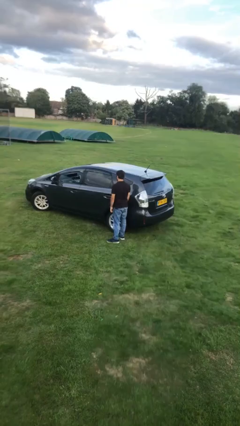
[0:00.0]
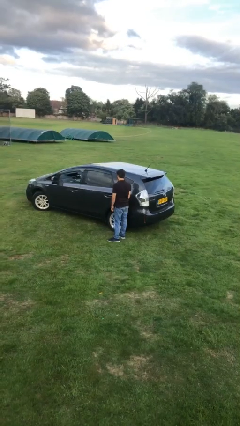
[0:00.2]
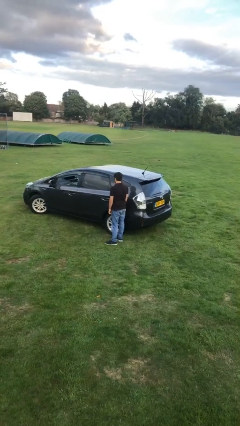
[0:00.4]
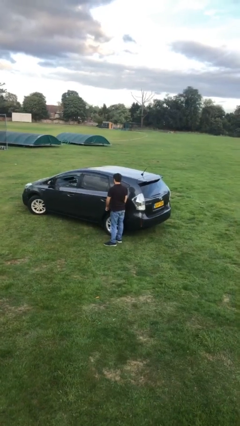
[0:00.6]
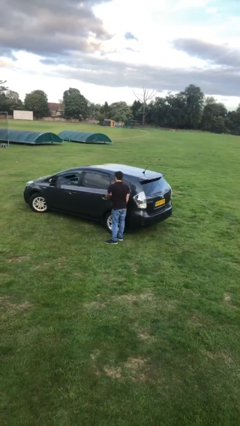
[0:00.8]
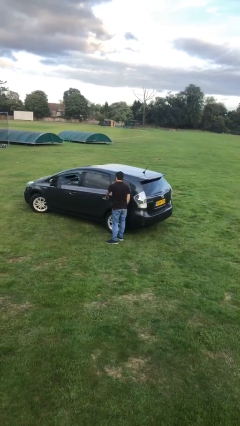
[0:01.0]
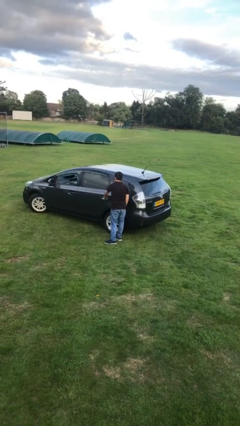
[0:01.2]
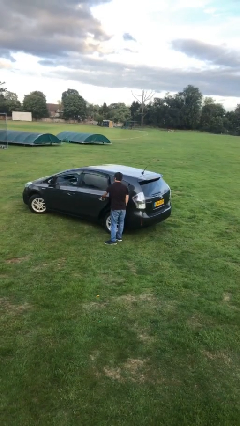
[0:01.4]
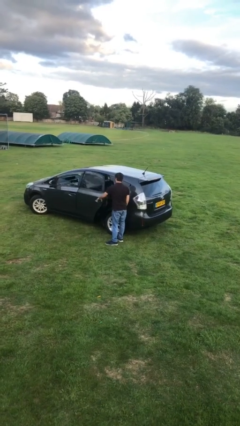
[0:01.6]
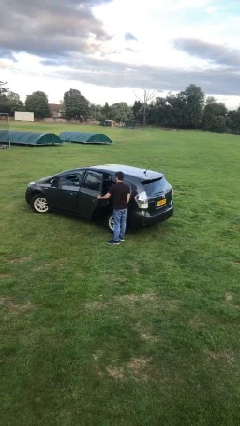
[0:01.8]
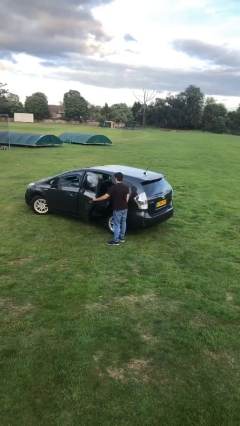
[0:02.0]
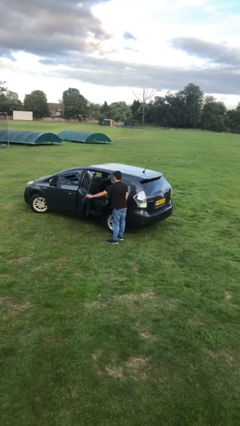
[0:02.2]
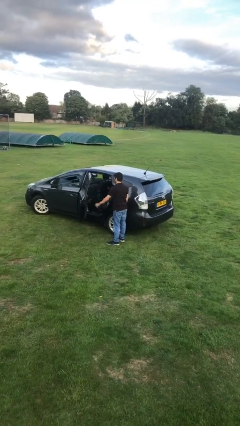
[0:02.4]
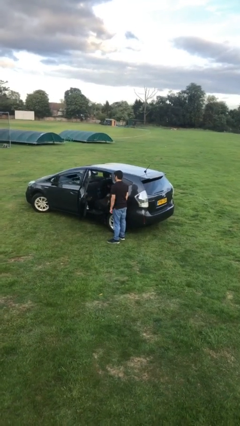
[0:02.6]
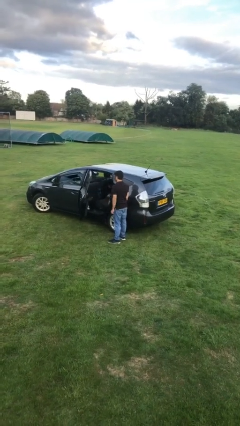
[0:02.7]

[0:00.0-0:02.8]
person opens car door

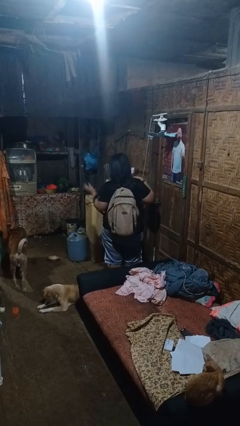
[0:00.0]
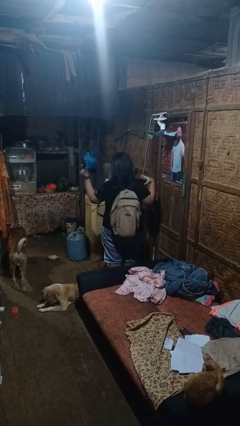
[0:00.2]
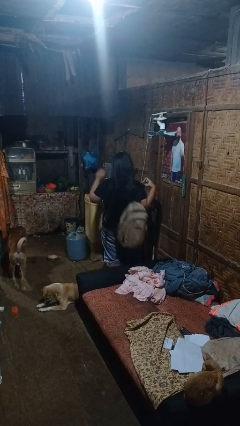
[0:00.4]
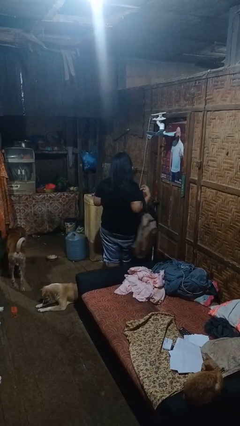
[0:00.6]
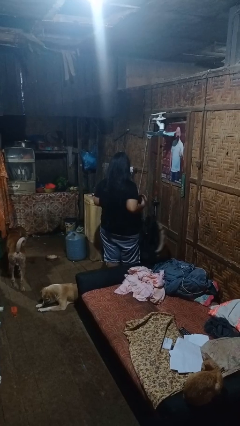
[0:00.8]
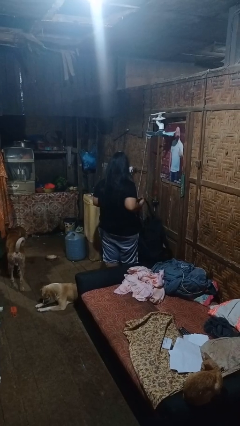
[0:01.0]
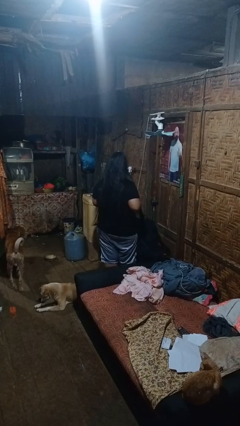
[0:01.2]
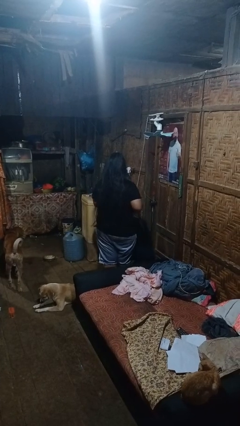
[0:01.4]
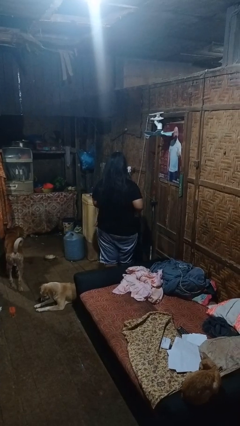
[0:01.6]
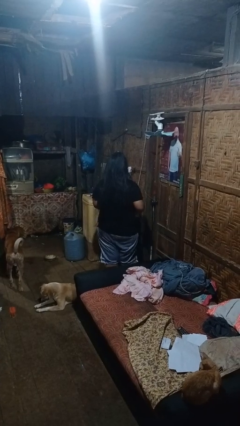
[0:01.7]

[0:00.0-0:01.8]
person takes off backpack

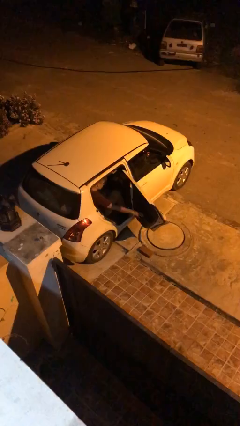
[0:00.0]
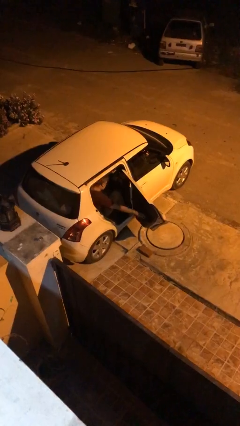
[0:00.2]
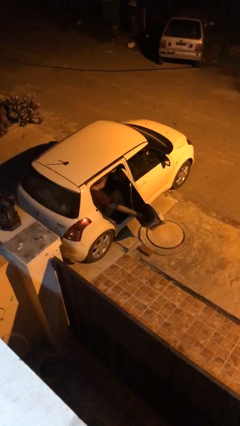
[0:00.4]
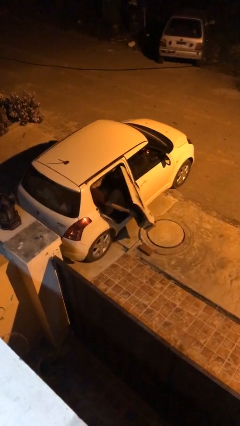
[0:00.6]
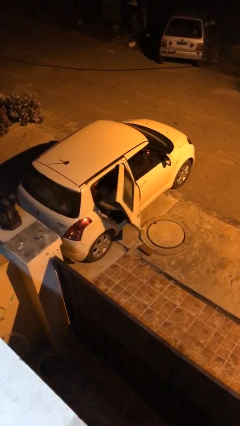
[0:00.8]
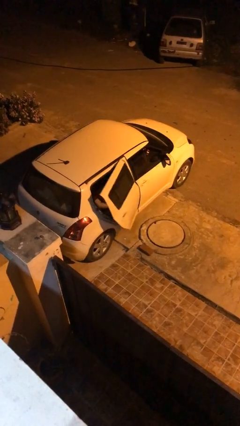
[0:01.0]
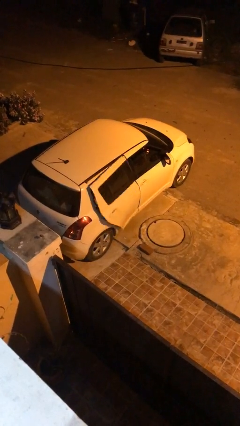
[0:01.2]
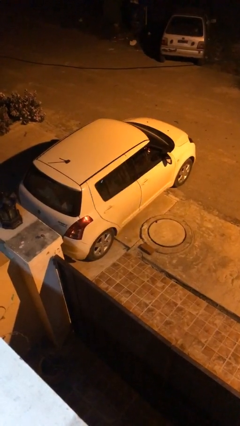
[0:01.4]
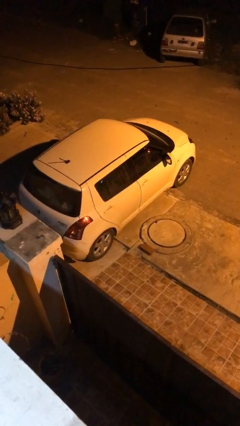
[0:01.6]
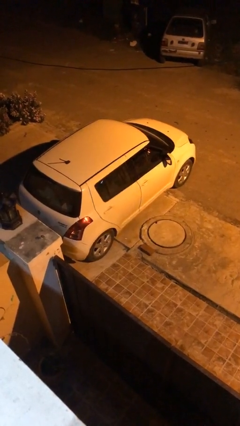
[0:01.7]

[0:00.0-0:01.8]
person closes car door

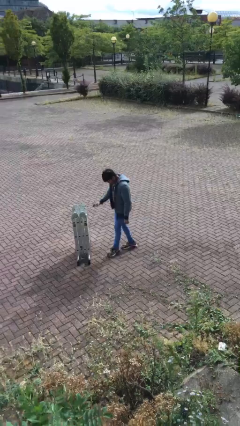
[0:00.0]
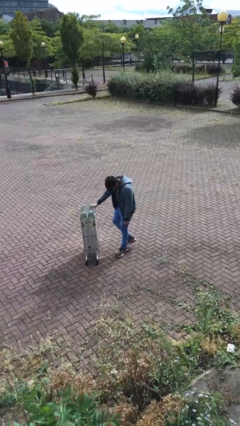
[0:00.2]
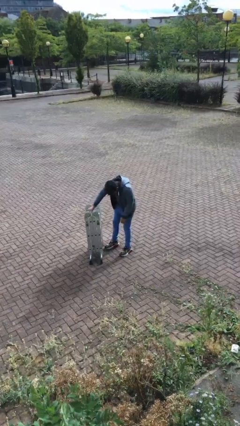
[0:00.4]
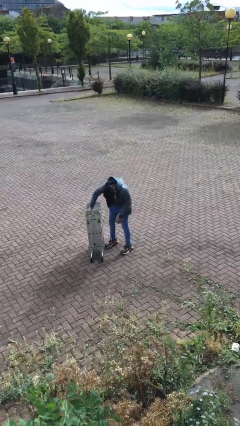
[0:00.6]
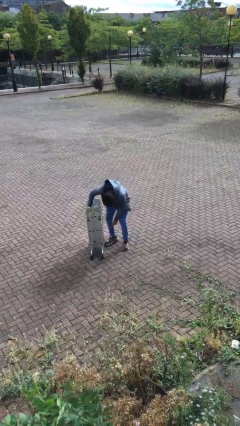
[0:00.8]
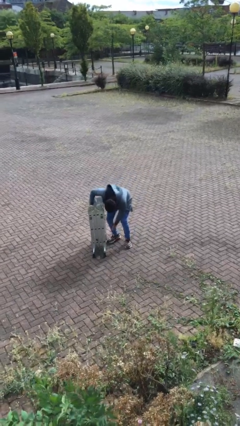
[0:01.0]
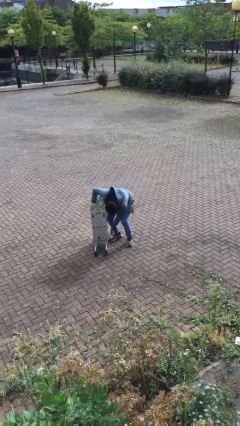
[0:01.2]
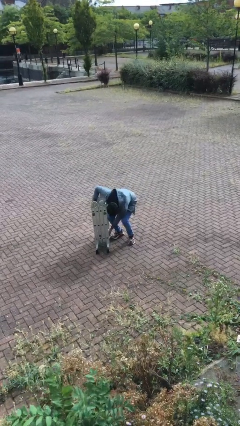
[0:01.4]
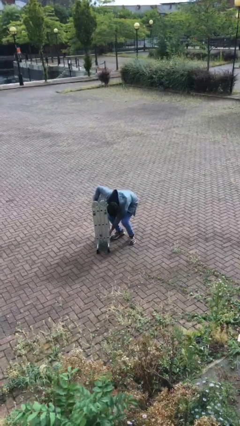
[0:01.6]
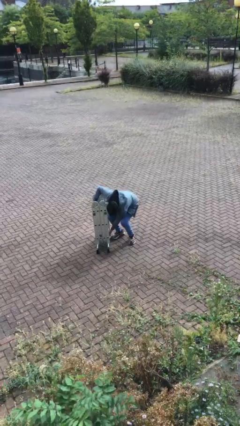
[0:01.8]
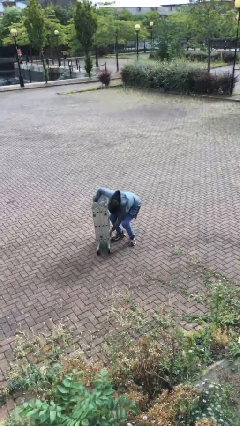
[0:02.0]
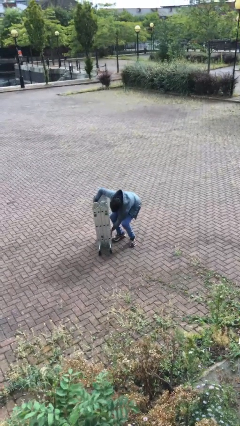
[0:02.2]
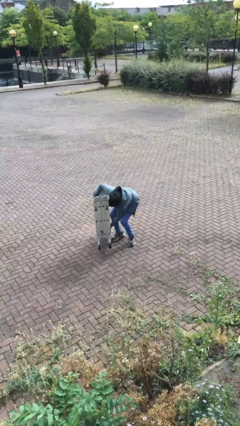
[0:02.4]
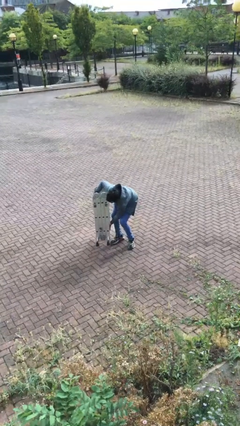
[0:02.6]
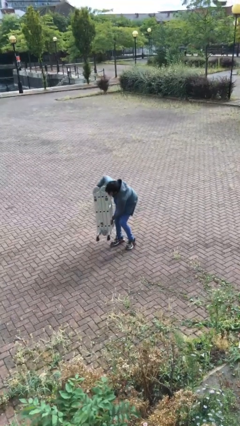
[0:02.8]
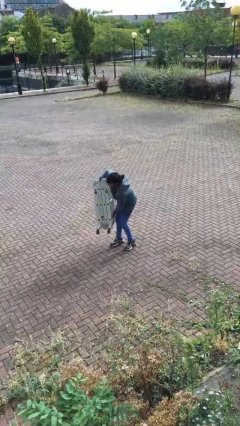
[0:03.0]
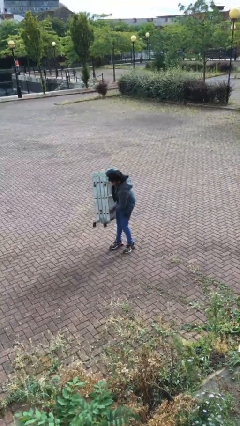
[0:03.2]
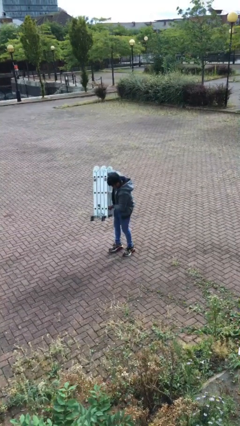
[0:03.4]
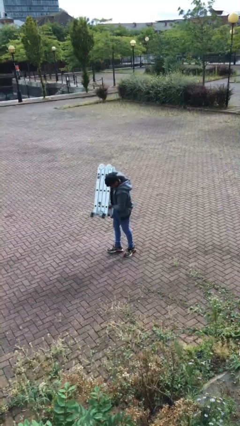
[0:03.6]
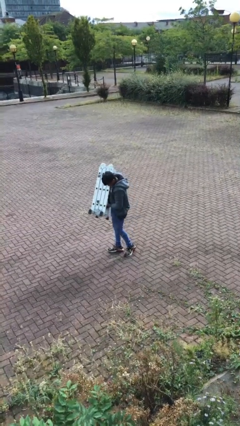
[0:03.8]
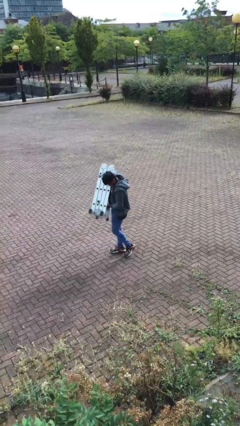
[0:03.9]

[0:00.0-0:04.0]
person picks up object from floor

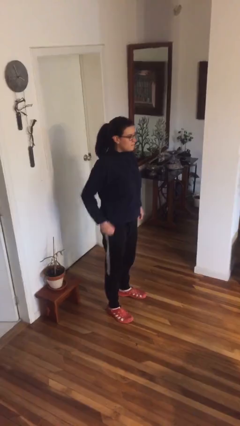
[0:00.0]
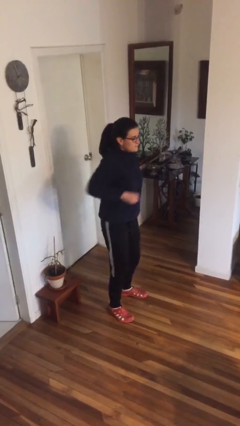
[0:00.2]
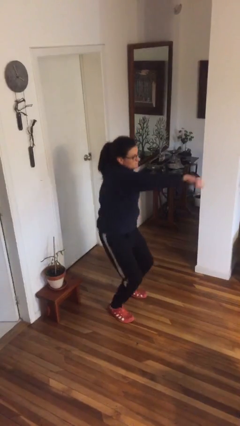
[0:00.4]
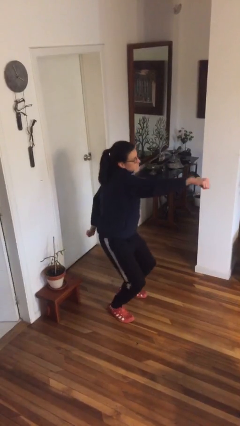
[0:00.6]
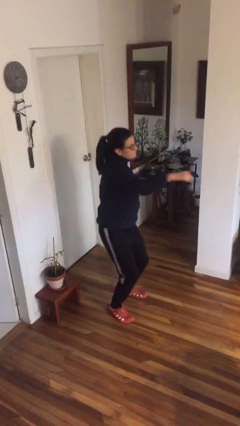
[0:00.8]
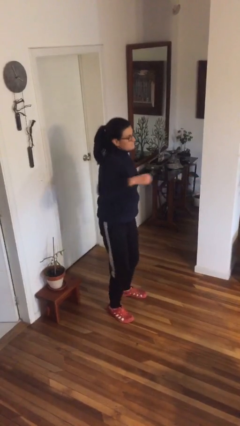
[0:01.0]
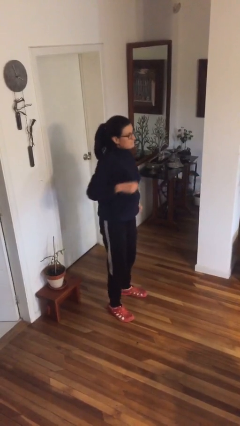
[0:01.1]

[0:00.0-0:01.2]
person punches

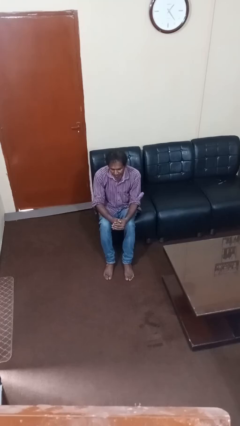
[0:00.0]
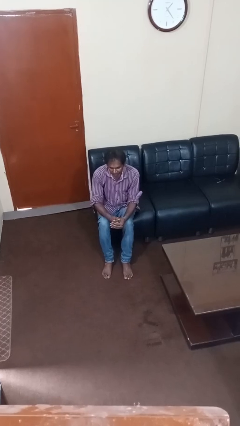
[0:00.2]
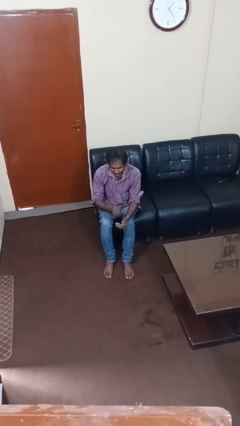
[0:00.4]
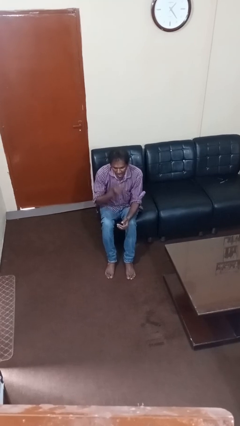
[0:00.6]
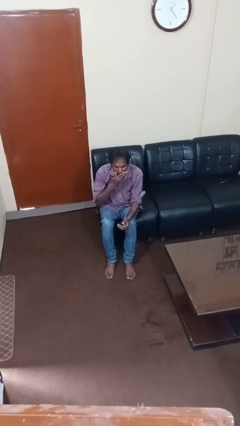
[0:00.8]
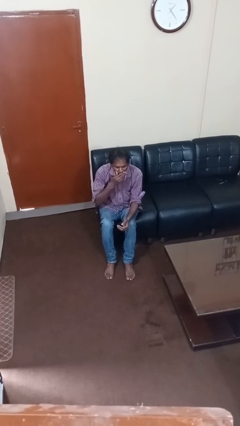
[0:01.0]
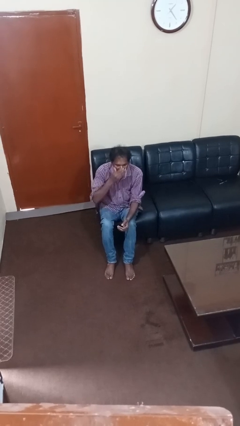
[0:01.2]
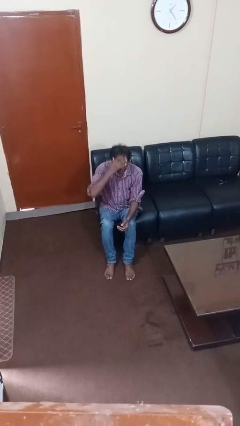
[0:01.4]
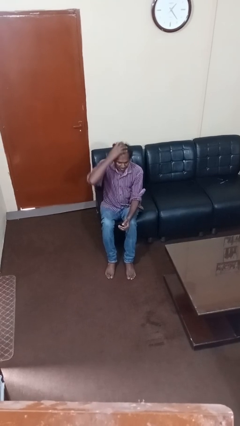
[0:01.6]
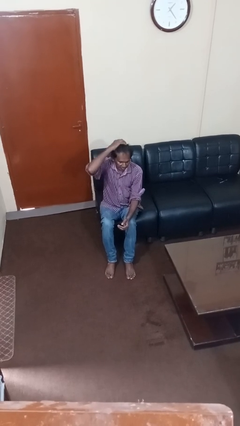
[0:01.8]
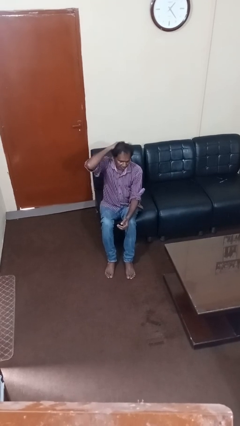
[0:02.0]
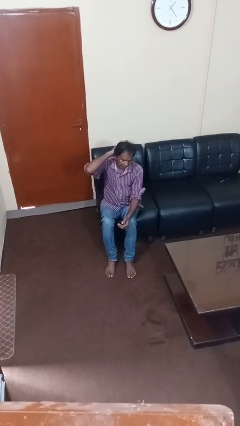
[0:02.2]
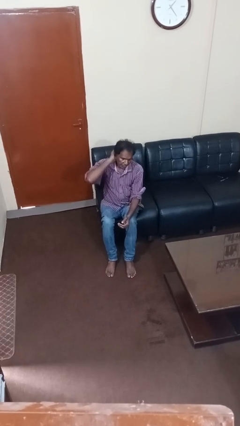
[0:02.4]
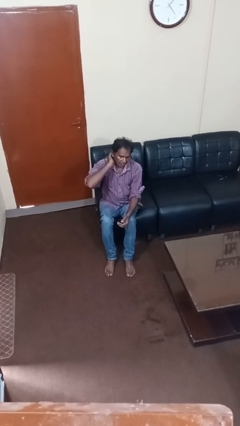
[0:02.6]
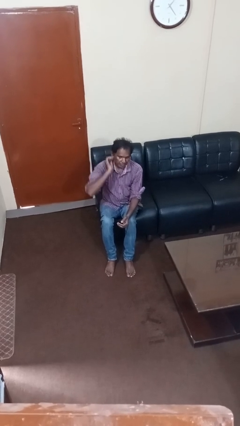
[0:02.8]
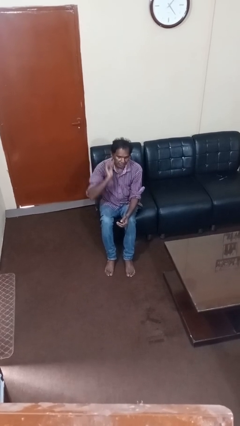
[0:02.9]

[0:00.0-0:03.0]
person yawns

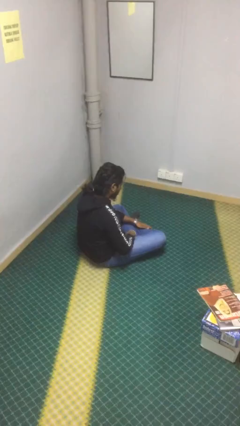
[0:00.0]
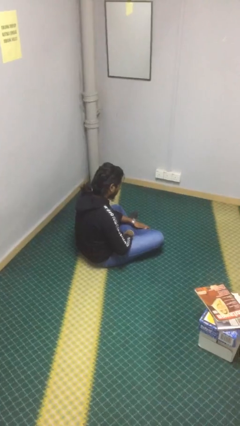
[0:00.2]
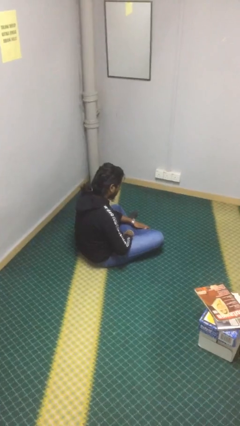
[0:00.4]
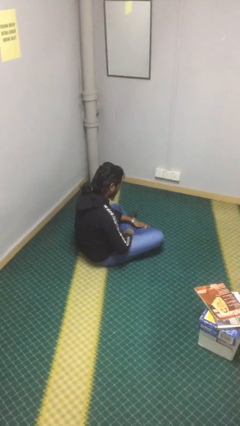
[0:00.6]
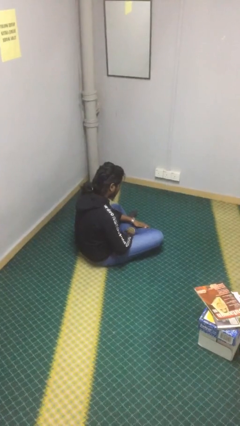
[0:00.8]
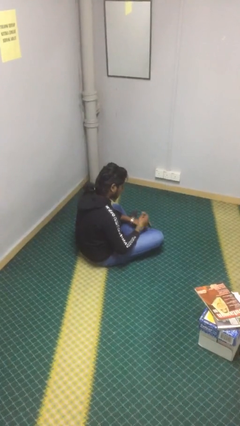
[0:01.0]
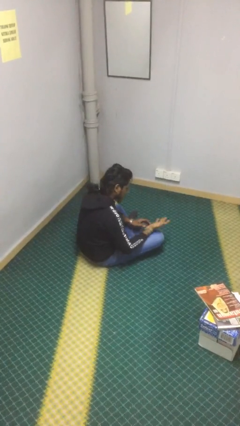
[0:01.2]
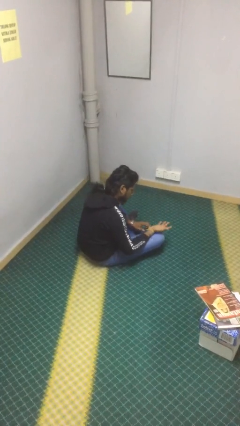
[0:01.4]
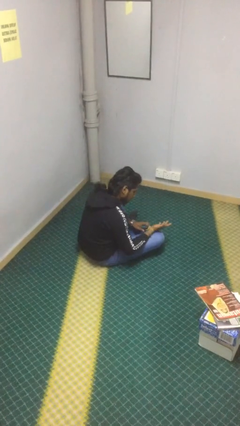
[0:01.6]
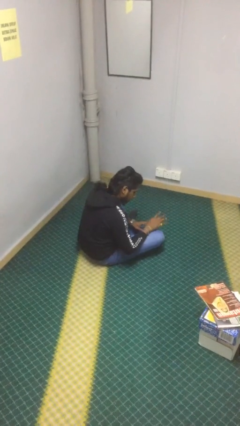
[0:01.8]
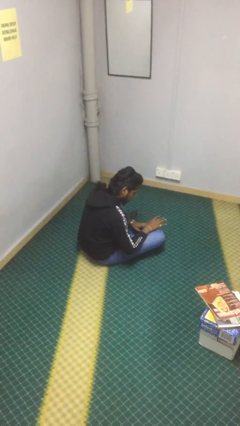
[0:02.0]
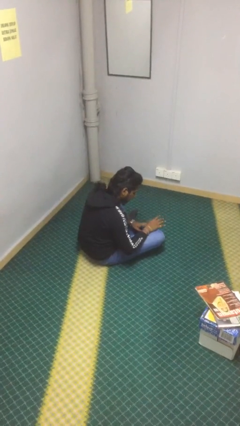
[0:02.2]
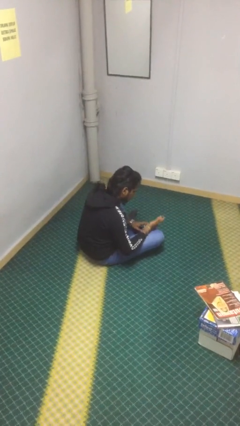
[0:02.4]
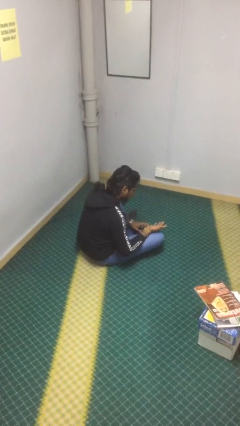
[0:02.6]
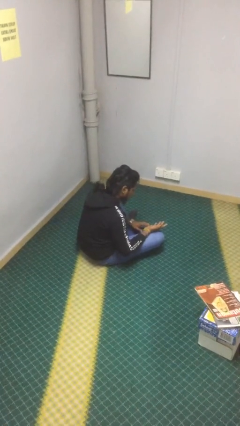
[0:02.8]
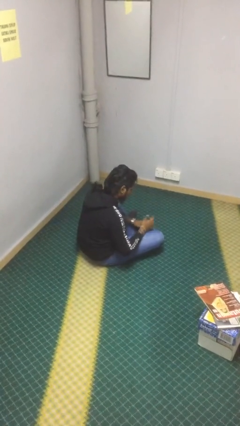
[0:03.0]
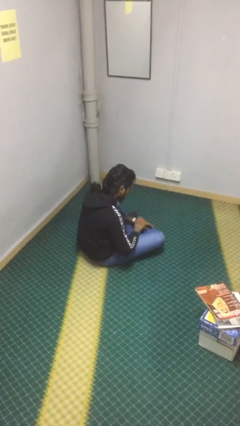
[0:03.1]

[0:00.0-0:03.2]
person looks at hands in lap
